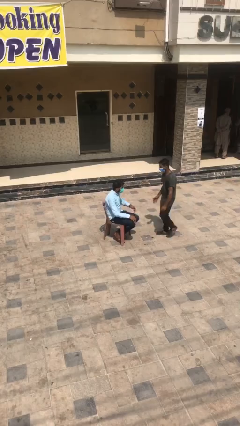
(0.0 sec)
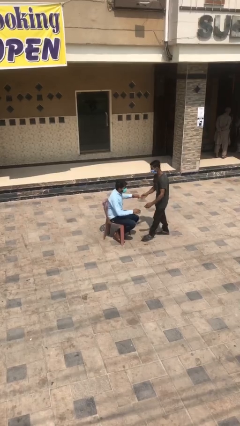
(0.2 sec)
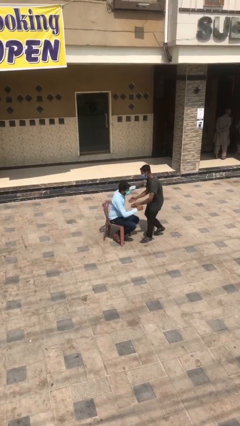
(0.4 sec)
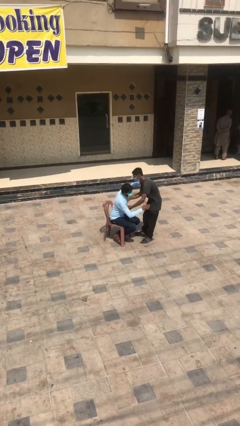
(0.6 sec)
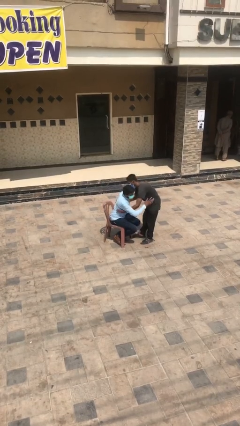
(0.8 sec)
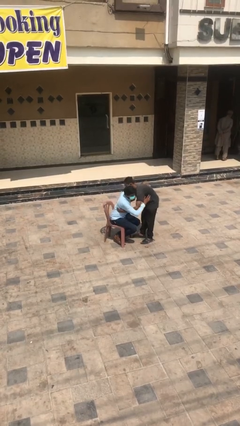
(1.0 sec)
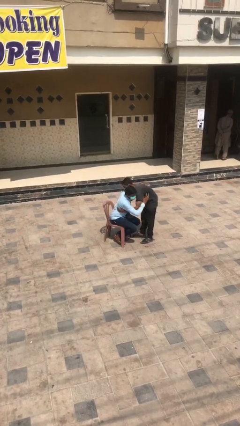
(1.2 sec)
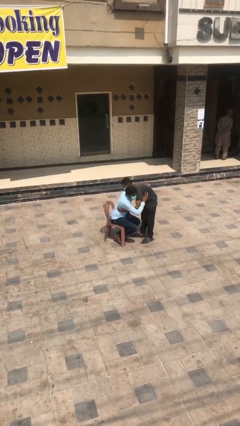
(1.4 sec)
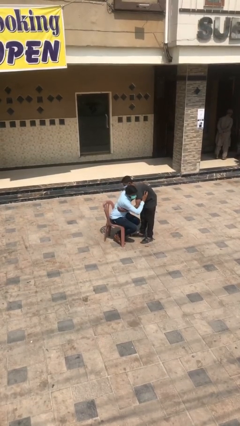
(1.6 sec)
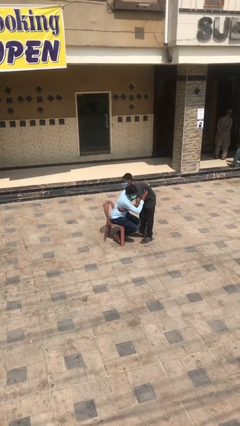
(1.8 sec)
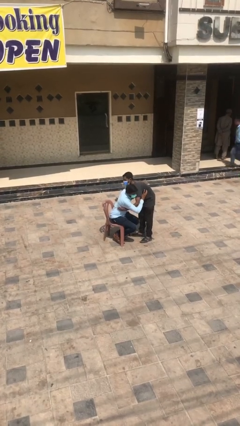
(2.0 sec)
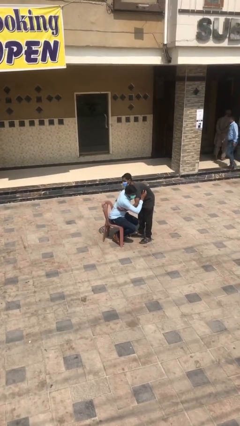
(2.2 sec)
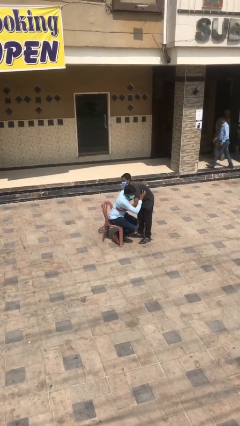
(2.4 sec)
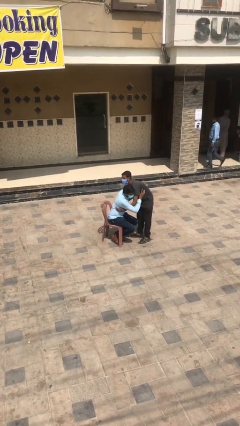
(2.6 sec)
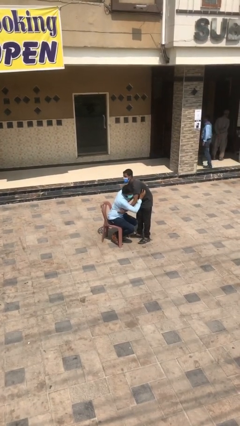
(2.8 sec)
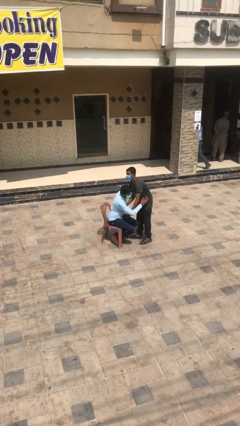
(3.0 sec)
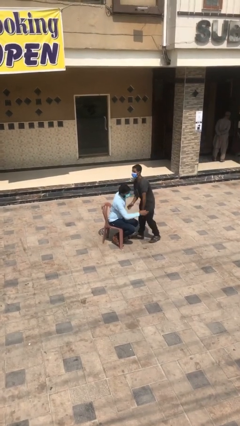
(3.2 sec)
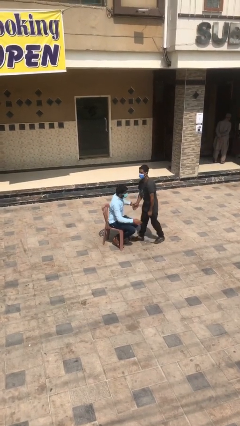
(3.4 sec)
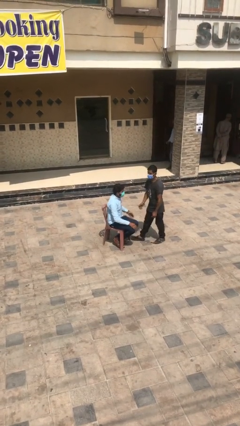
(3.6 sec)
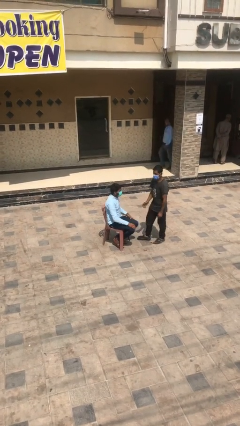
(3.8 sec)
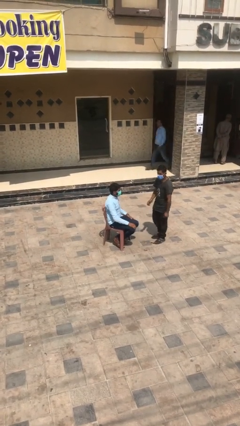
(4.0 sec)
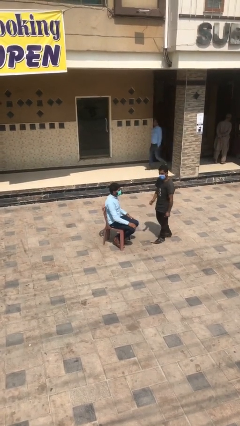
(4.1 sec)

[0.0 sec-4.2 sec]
person embraces person

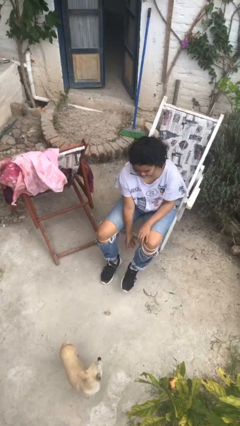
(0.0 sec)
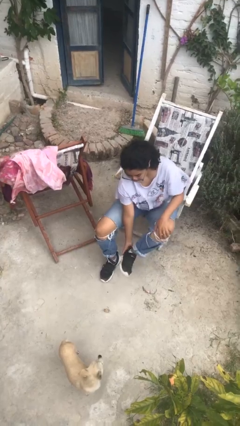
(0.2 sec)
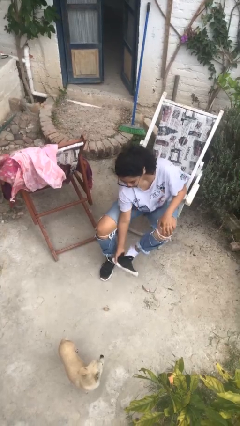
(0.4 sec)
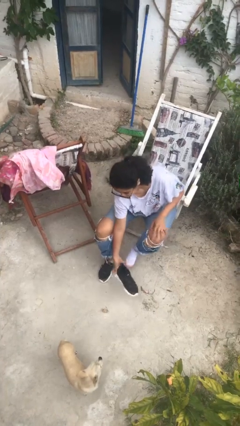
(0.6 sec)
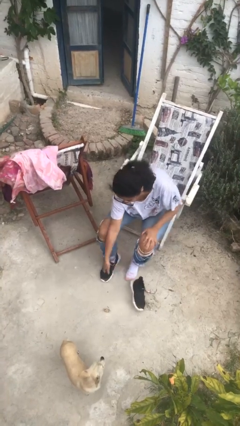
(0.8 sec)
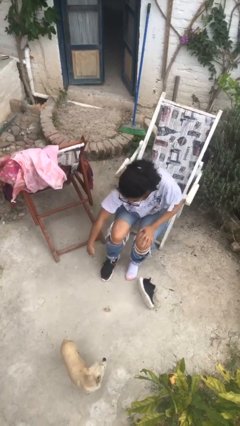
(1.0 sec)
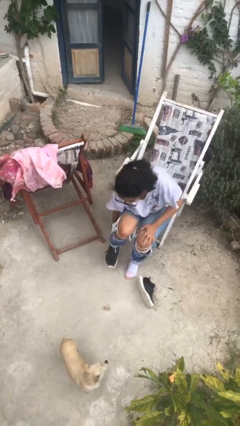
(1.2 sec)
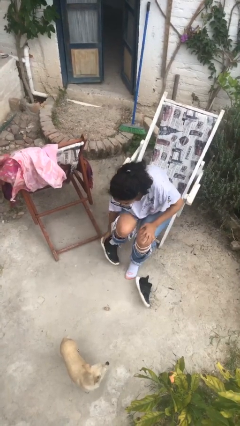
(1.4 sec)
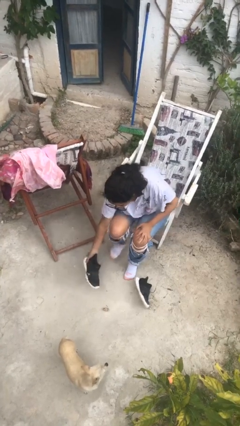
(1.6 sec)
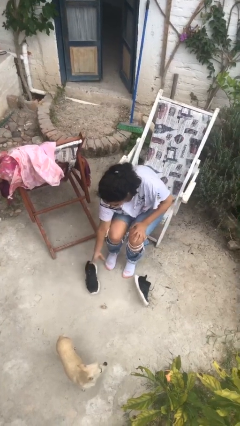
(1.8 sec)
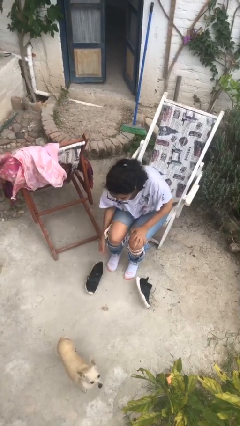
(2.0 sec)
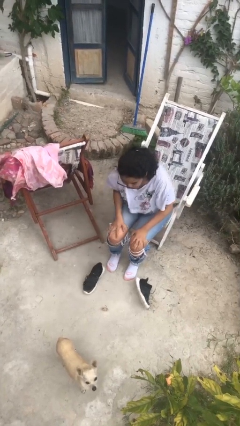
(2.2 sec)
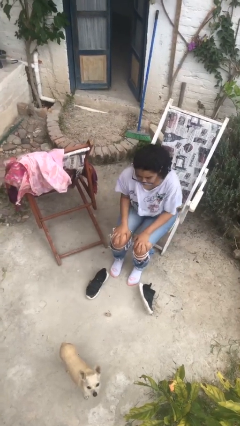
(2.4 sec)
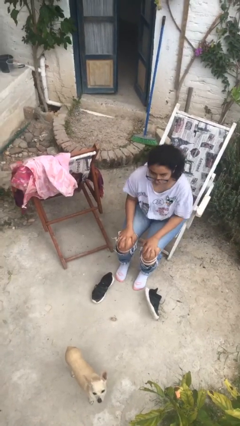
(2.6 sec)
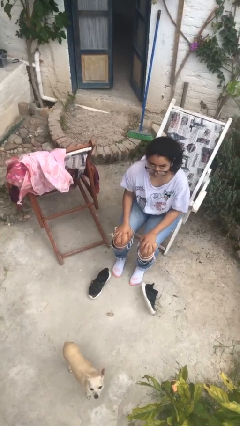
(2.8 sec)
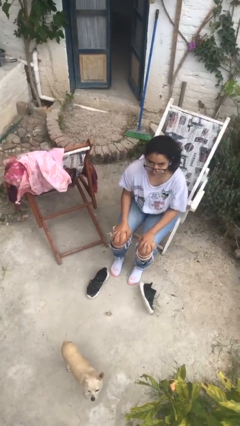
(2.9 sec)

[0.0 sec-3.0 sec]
person takes off shoes

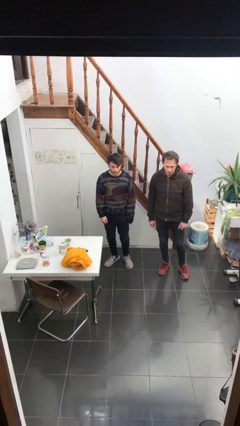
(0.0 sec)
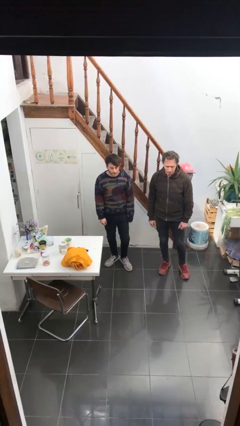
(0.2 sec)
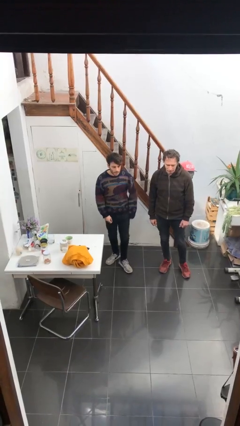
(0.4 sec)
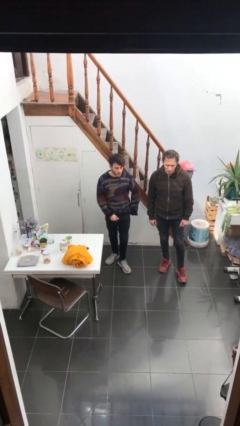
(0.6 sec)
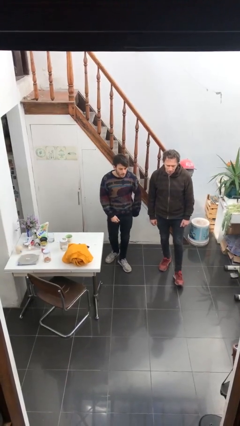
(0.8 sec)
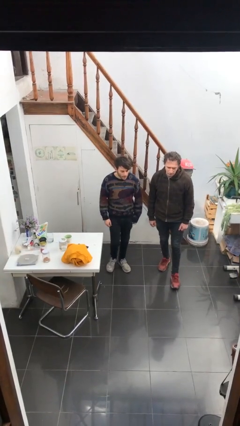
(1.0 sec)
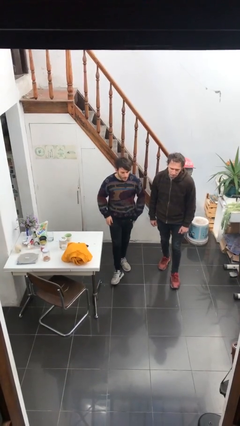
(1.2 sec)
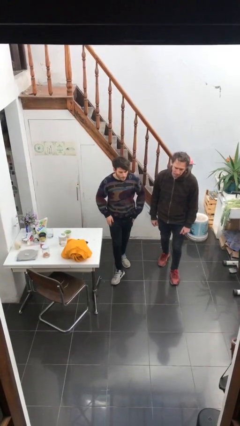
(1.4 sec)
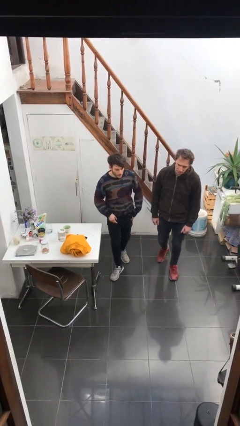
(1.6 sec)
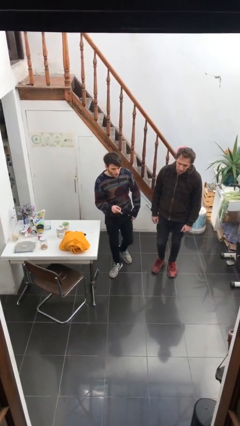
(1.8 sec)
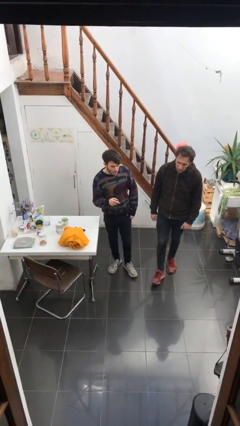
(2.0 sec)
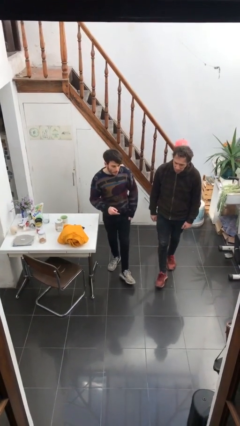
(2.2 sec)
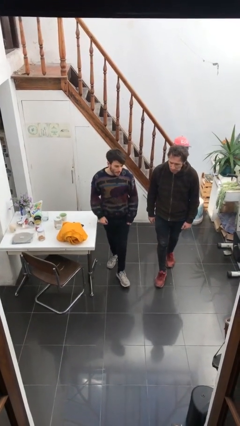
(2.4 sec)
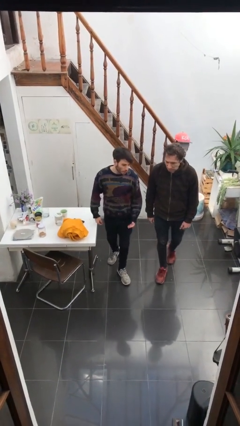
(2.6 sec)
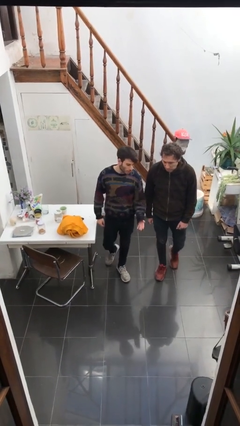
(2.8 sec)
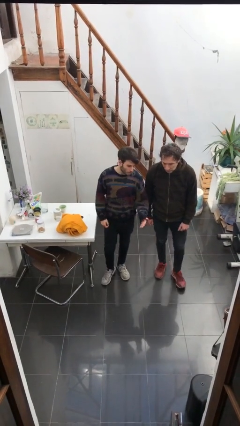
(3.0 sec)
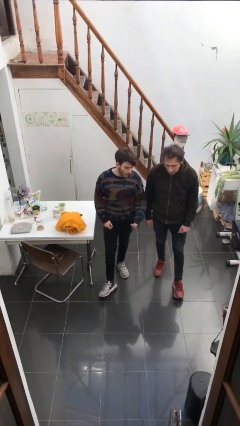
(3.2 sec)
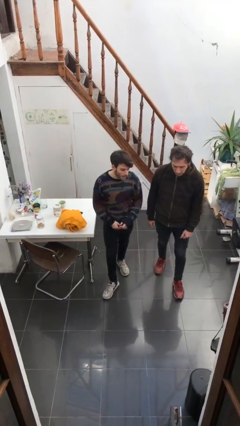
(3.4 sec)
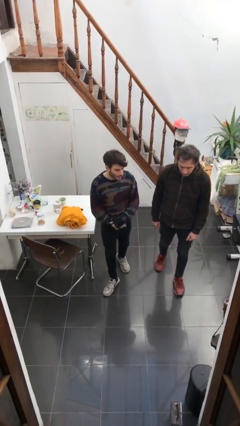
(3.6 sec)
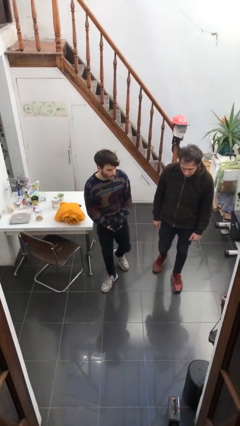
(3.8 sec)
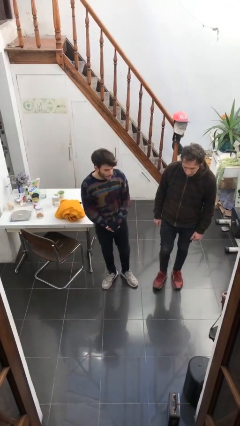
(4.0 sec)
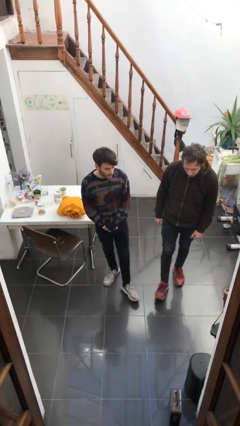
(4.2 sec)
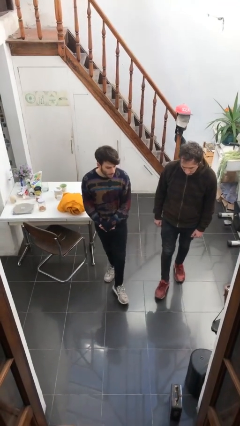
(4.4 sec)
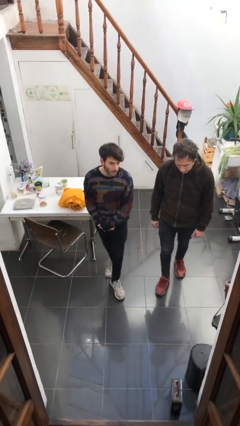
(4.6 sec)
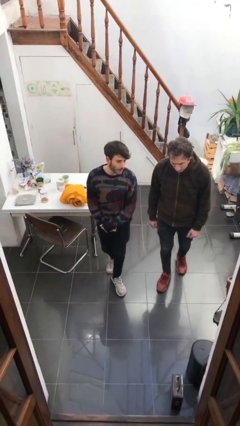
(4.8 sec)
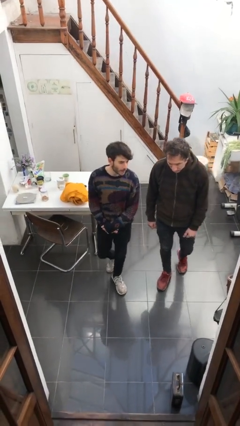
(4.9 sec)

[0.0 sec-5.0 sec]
person talks to person

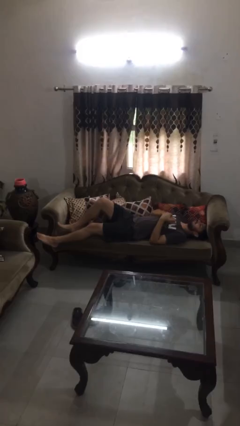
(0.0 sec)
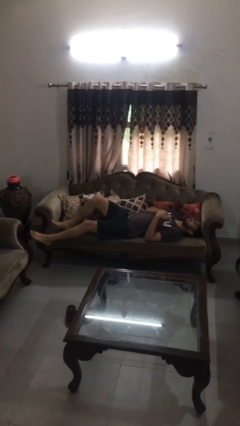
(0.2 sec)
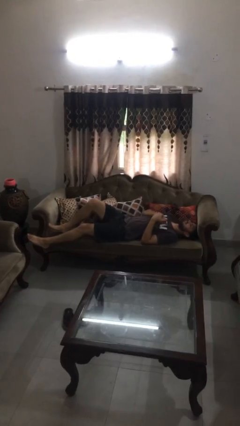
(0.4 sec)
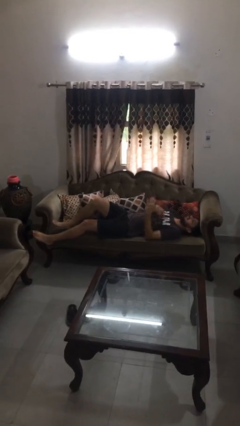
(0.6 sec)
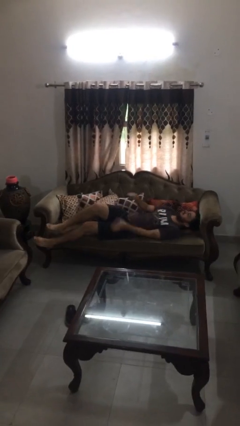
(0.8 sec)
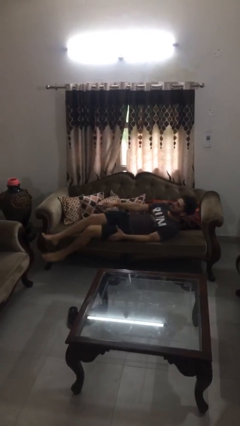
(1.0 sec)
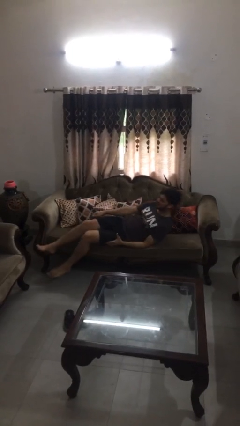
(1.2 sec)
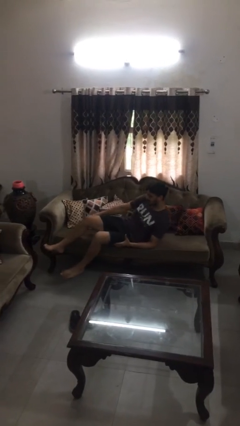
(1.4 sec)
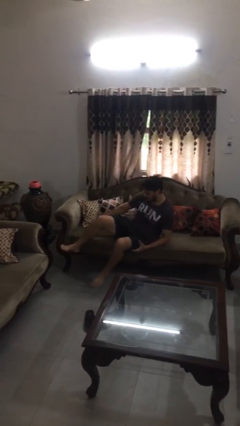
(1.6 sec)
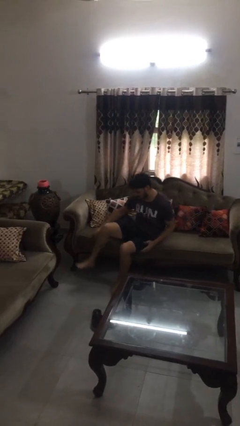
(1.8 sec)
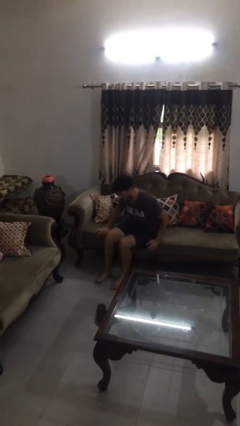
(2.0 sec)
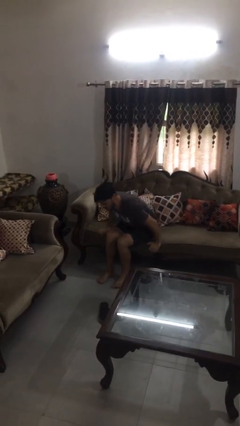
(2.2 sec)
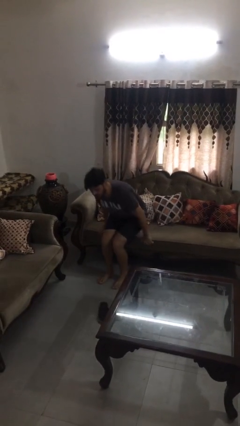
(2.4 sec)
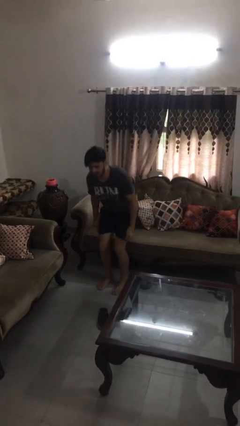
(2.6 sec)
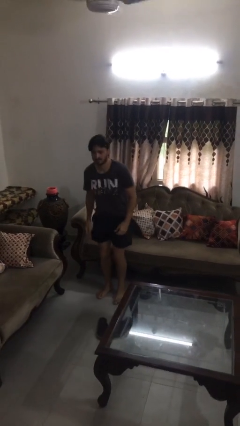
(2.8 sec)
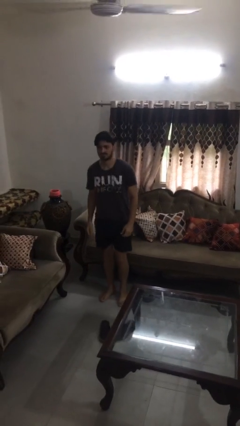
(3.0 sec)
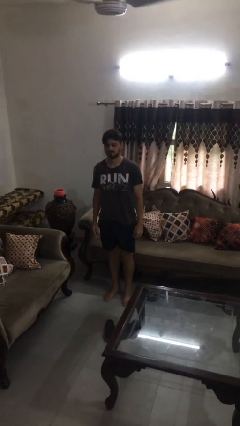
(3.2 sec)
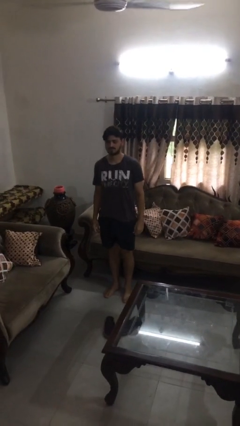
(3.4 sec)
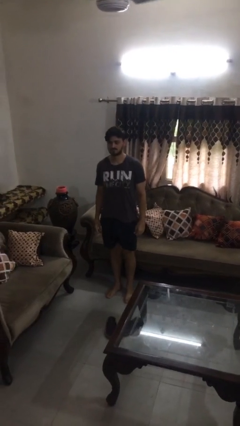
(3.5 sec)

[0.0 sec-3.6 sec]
person stands up

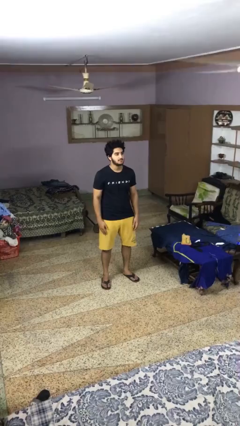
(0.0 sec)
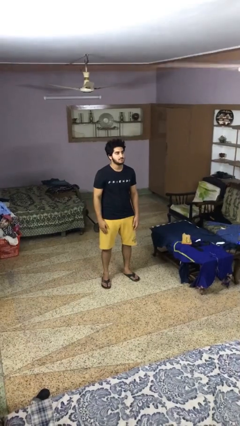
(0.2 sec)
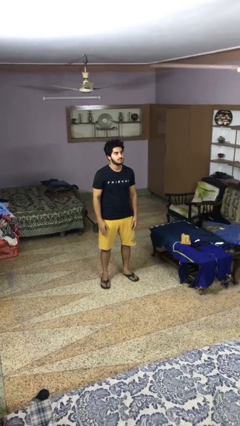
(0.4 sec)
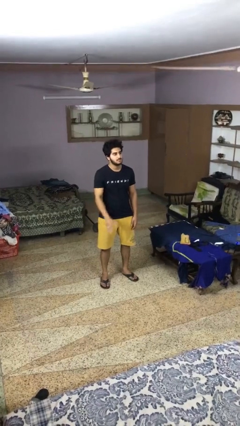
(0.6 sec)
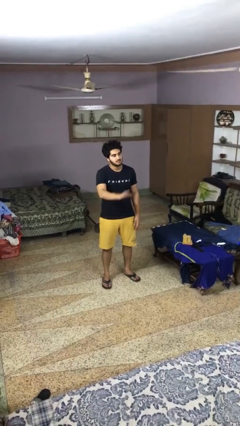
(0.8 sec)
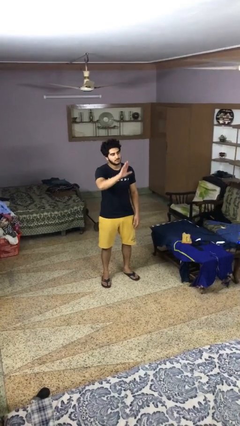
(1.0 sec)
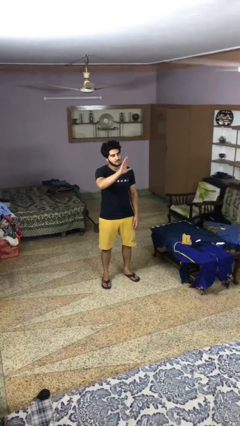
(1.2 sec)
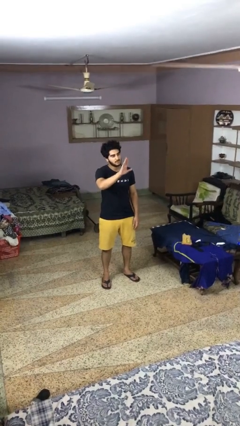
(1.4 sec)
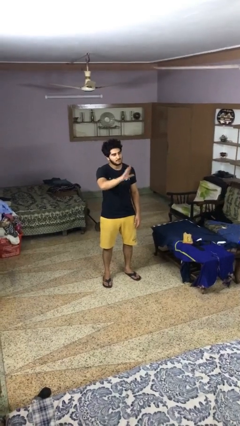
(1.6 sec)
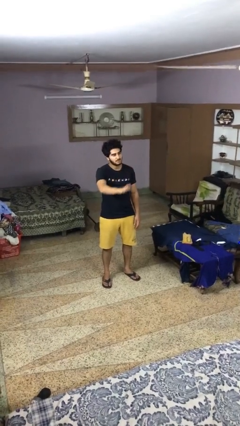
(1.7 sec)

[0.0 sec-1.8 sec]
person gestures stop
